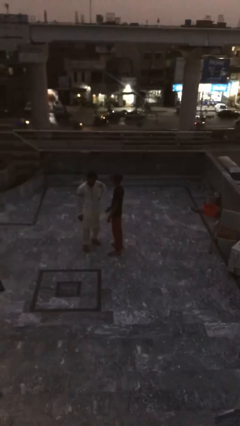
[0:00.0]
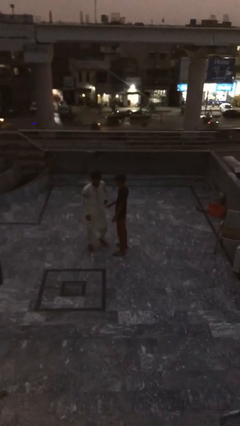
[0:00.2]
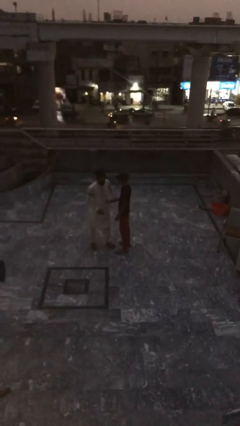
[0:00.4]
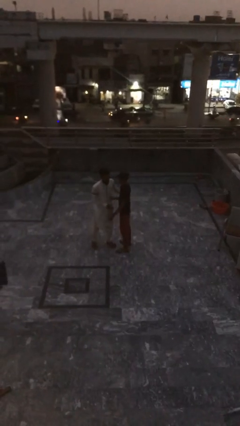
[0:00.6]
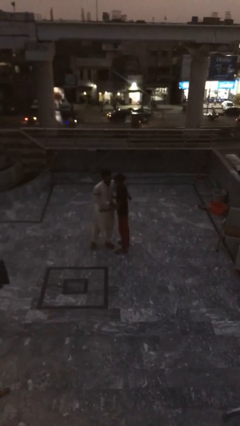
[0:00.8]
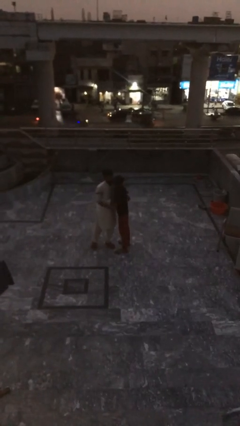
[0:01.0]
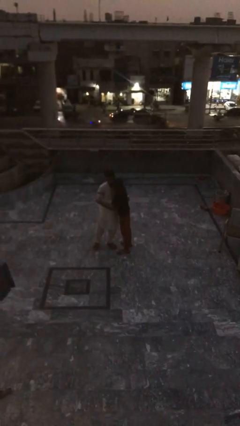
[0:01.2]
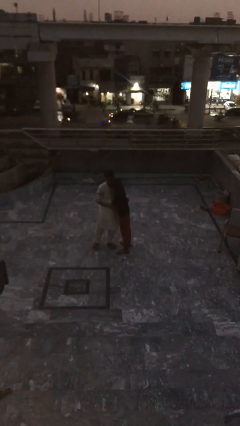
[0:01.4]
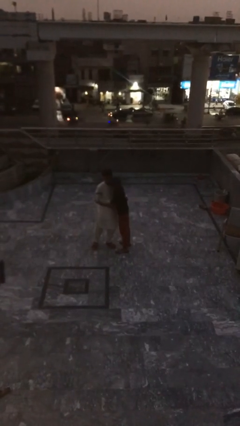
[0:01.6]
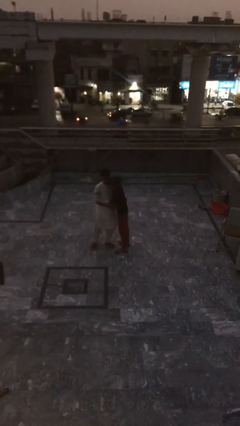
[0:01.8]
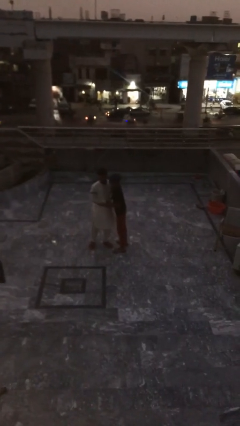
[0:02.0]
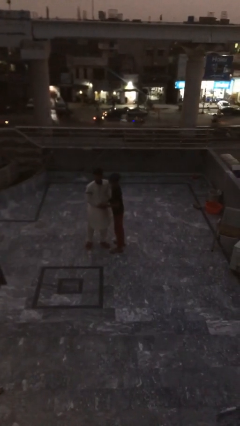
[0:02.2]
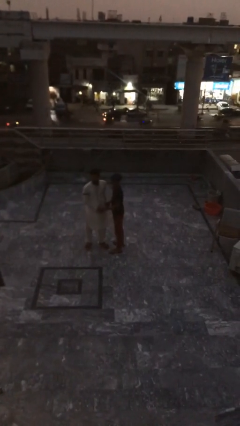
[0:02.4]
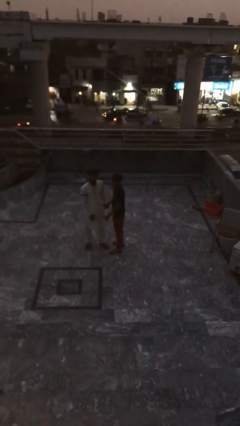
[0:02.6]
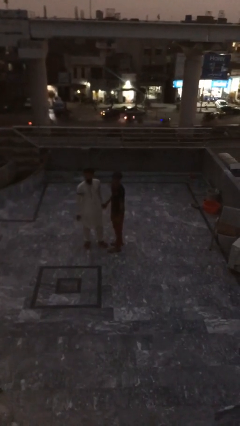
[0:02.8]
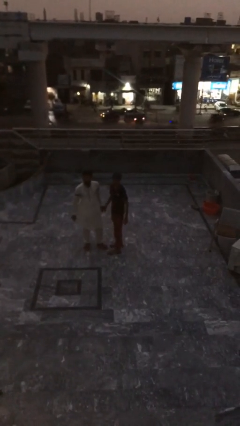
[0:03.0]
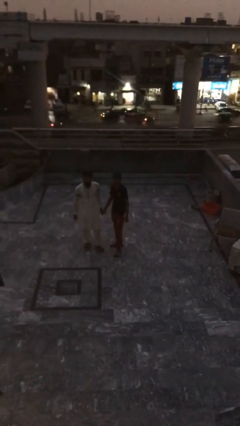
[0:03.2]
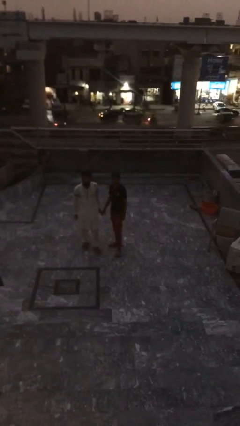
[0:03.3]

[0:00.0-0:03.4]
person embraces person

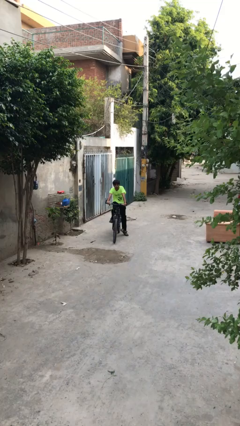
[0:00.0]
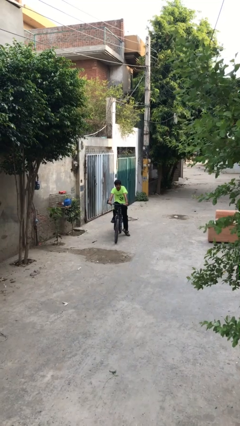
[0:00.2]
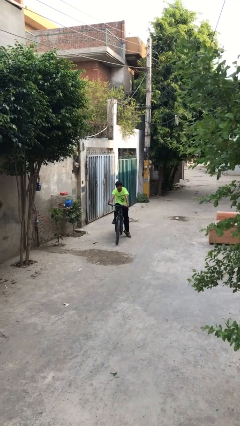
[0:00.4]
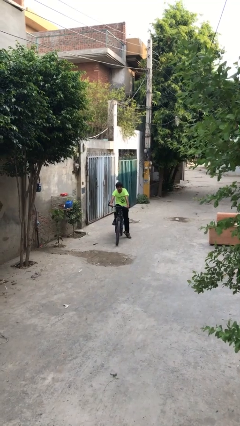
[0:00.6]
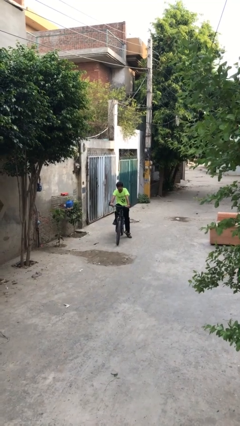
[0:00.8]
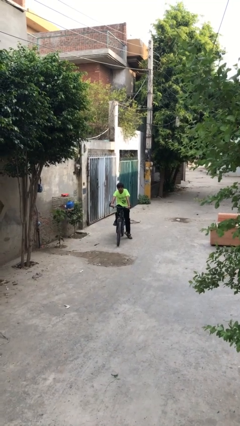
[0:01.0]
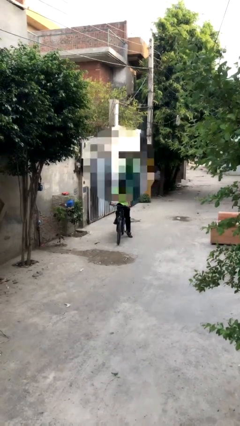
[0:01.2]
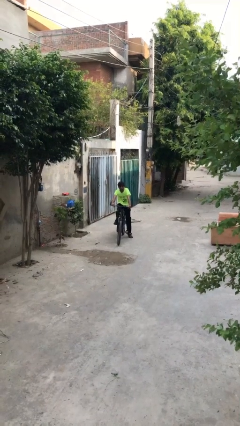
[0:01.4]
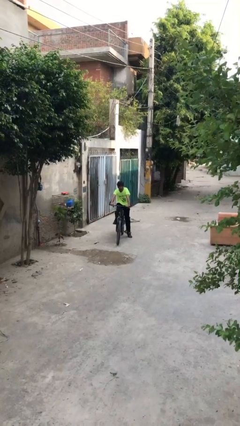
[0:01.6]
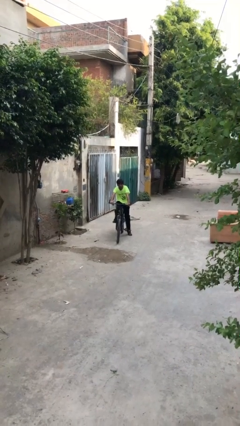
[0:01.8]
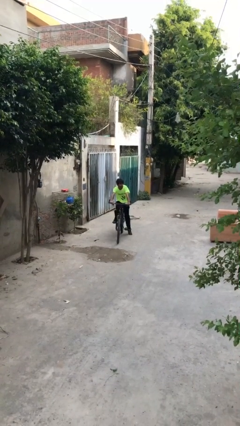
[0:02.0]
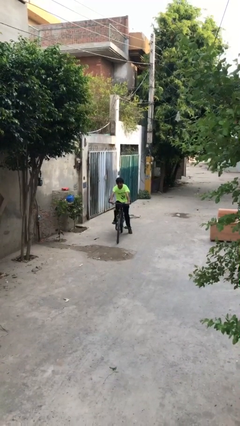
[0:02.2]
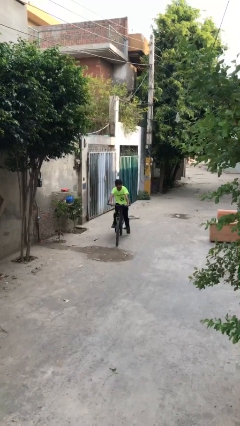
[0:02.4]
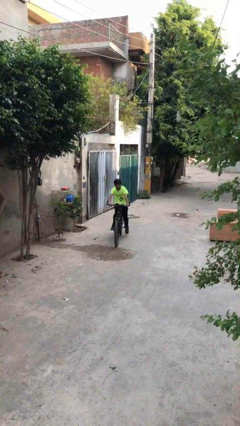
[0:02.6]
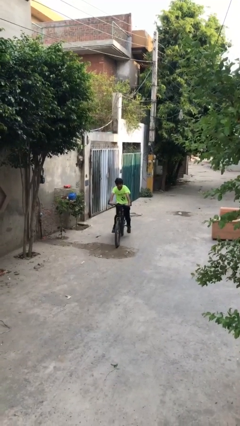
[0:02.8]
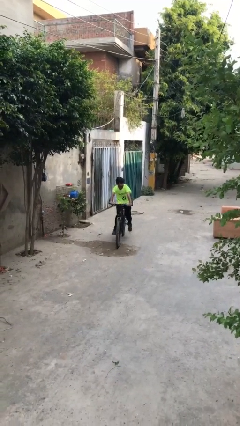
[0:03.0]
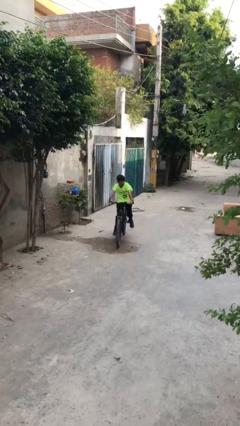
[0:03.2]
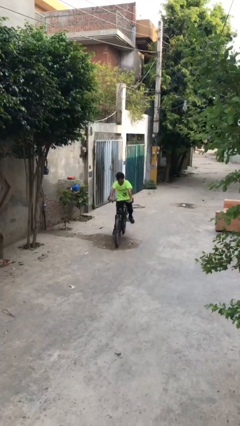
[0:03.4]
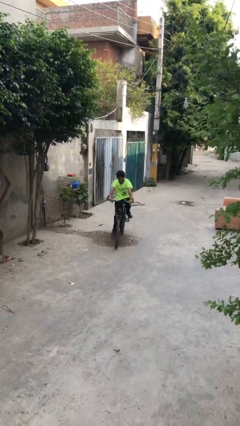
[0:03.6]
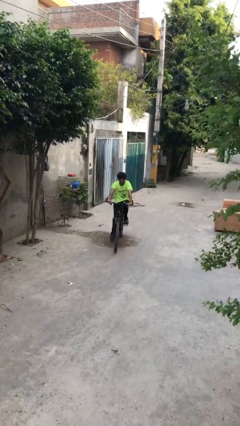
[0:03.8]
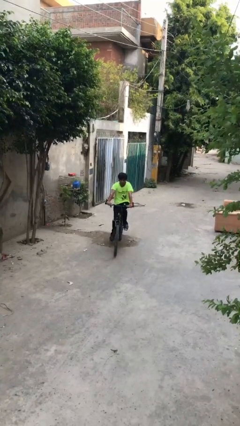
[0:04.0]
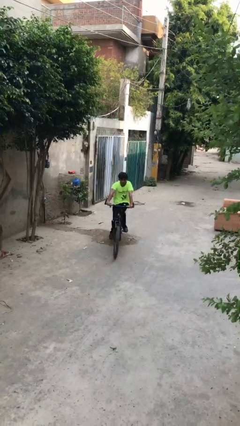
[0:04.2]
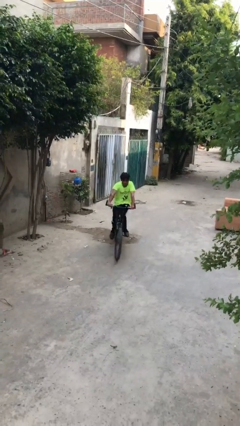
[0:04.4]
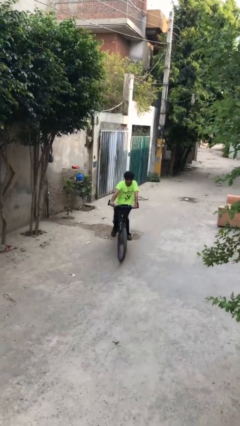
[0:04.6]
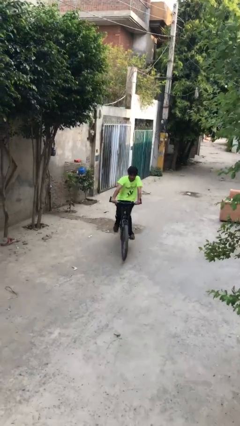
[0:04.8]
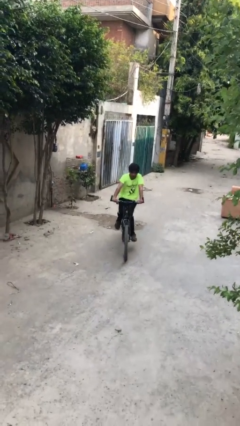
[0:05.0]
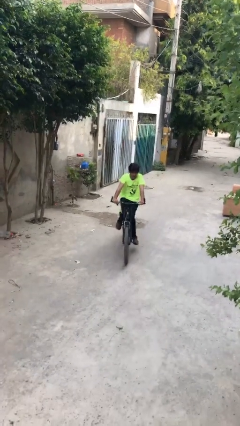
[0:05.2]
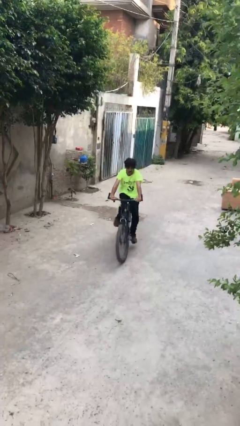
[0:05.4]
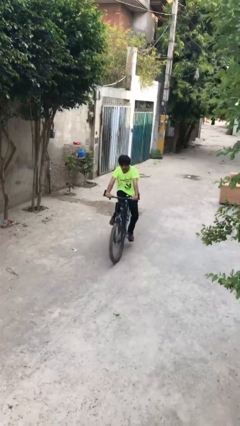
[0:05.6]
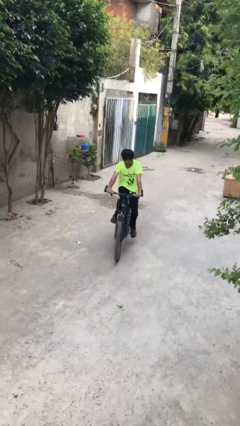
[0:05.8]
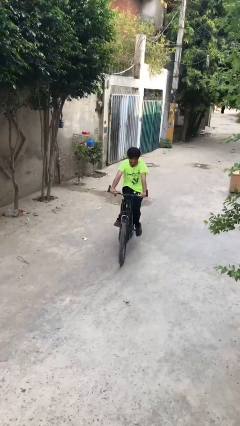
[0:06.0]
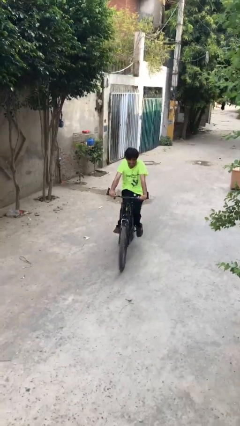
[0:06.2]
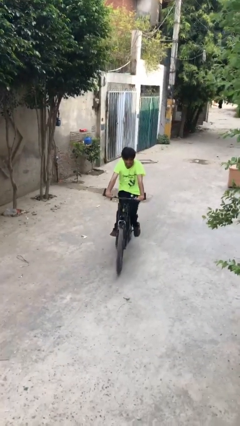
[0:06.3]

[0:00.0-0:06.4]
person rides bicycle

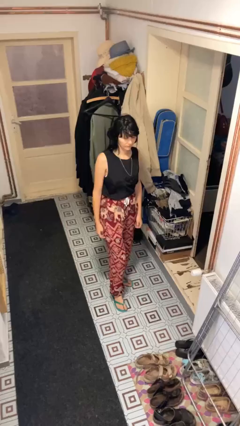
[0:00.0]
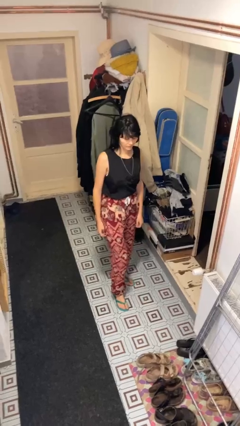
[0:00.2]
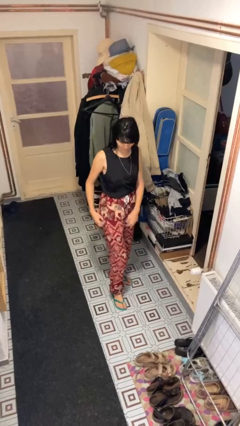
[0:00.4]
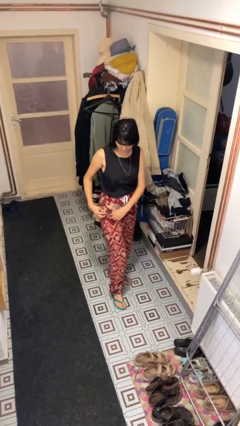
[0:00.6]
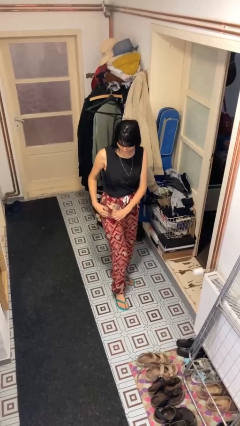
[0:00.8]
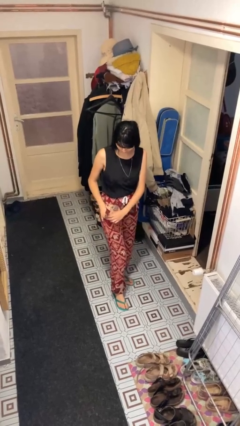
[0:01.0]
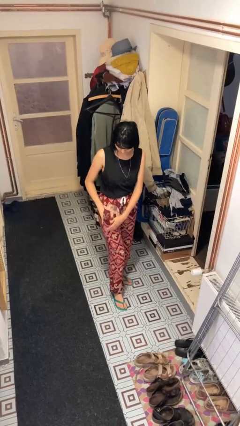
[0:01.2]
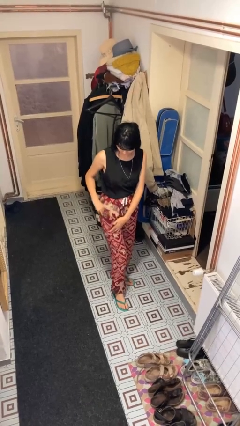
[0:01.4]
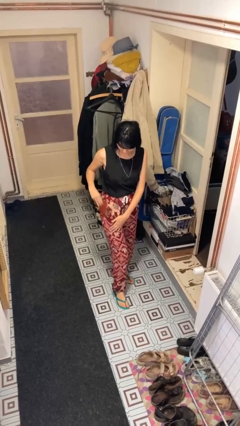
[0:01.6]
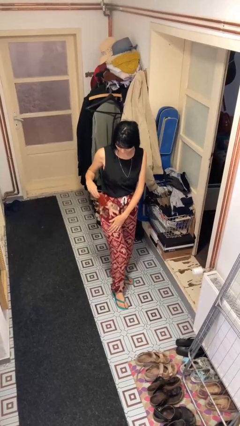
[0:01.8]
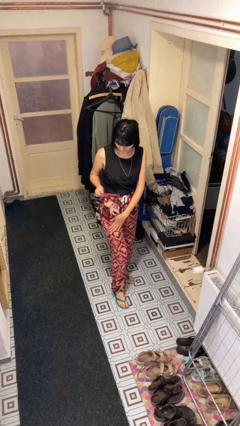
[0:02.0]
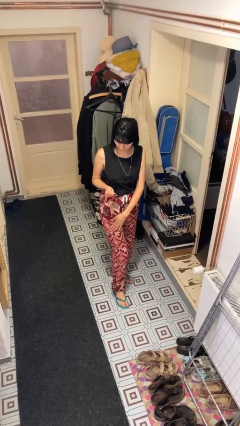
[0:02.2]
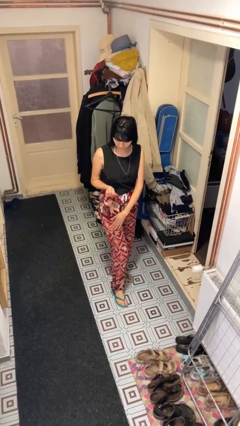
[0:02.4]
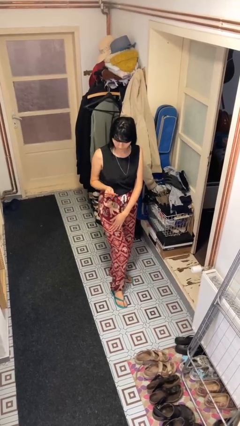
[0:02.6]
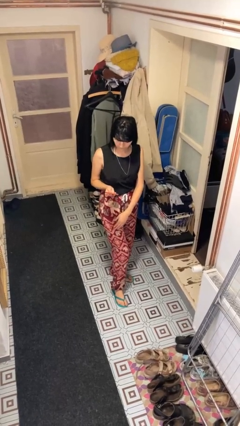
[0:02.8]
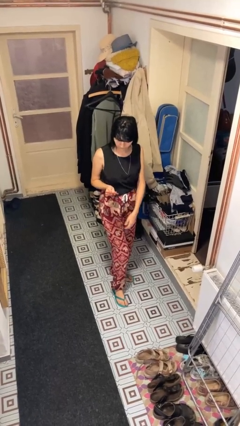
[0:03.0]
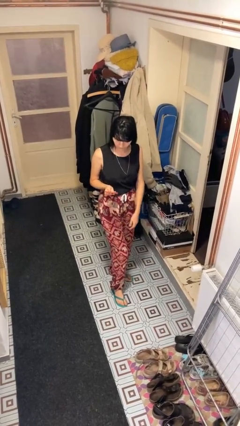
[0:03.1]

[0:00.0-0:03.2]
person takes phone from pocket

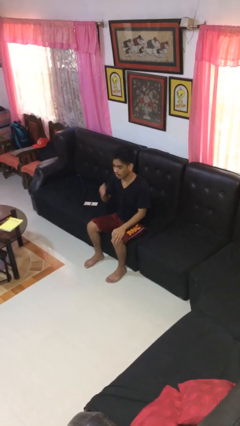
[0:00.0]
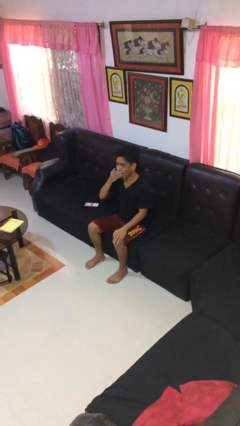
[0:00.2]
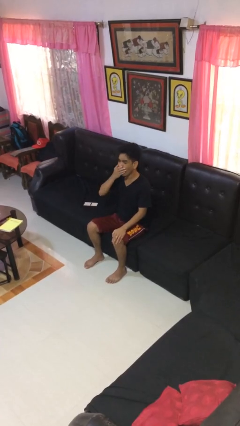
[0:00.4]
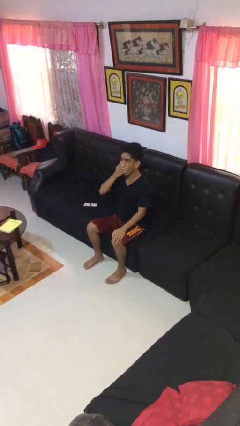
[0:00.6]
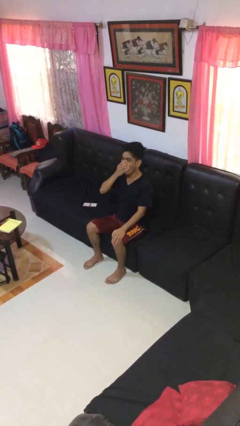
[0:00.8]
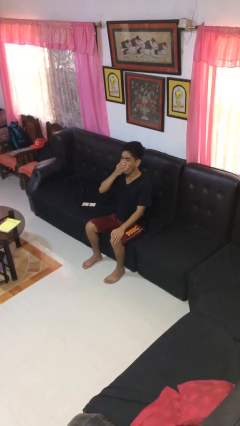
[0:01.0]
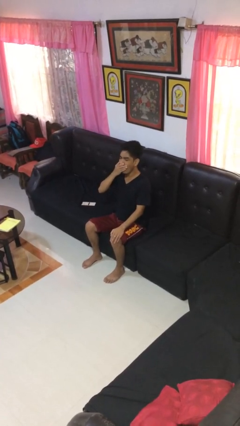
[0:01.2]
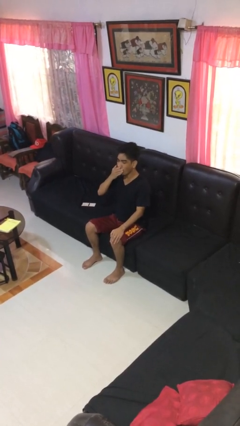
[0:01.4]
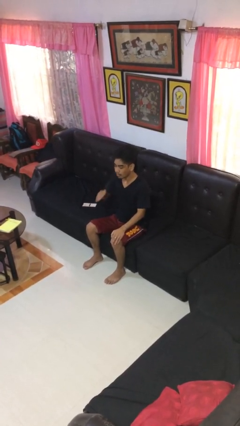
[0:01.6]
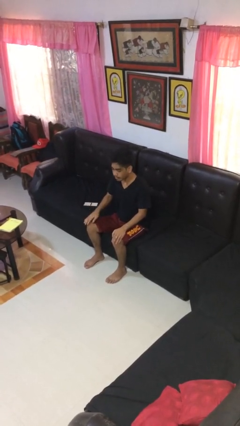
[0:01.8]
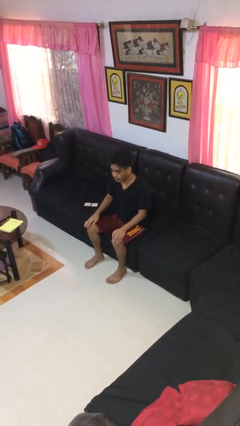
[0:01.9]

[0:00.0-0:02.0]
person yawns

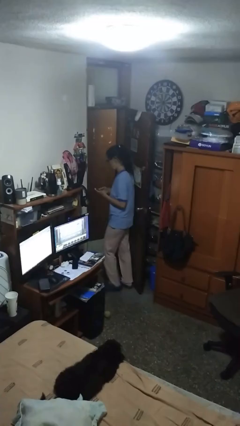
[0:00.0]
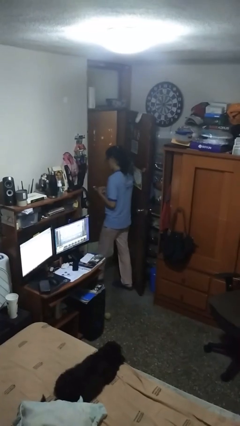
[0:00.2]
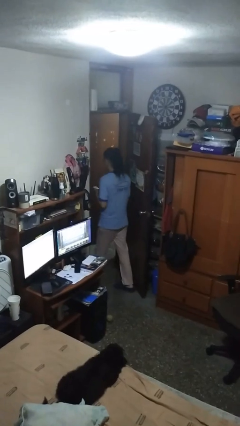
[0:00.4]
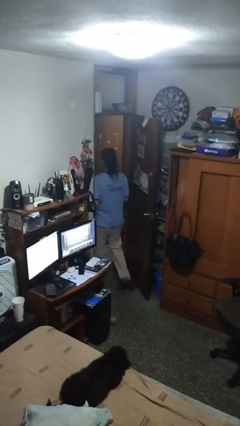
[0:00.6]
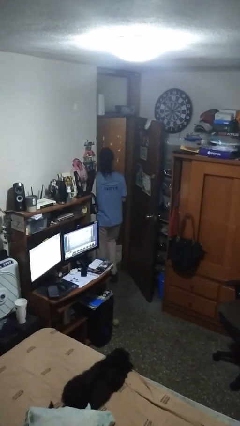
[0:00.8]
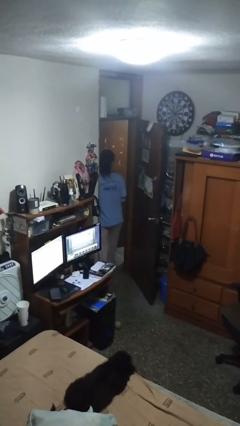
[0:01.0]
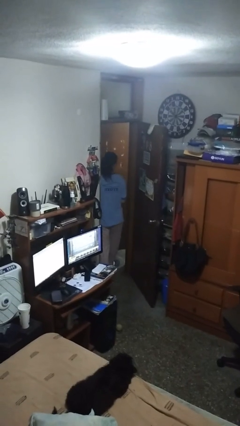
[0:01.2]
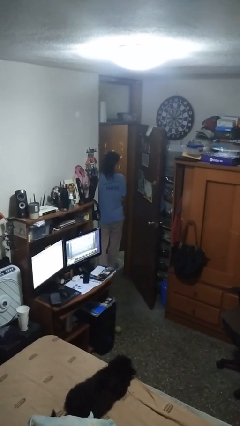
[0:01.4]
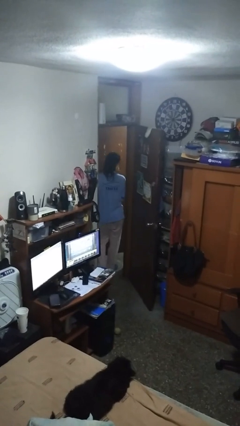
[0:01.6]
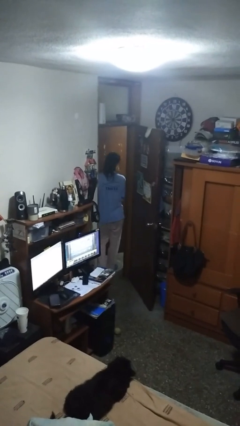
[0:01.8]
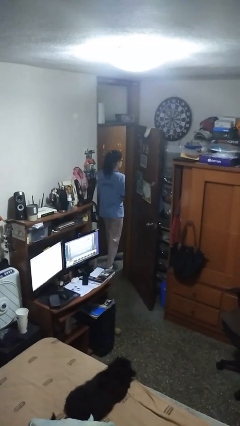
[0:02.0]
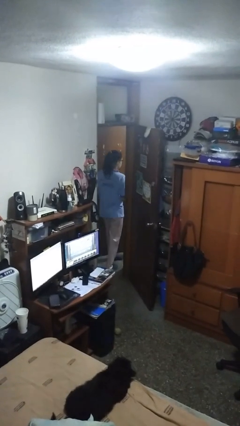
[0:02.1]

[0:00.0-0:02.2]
person exits scene through structure

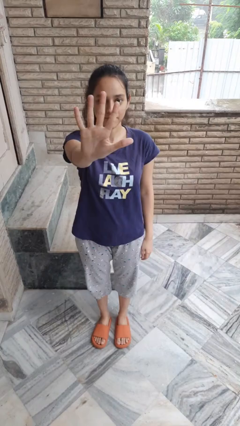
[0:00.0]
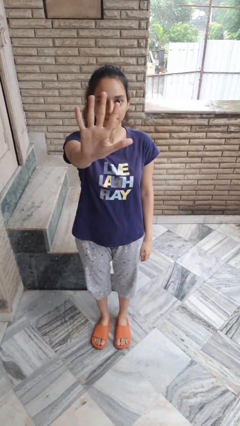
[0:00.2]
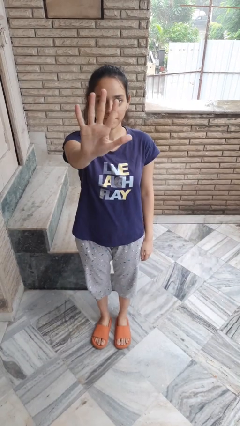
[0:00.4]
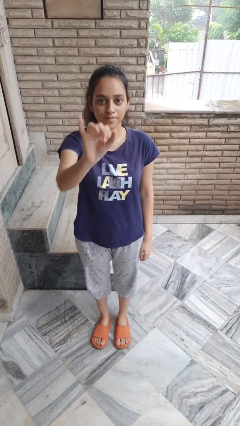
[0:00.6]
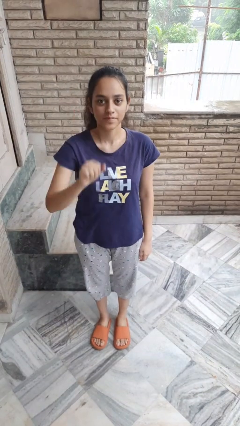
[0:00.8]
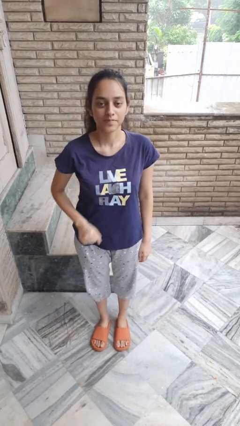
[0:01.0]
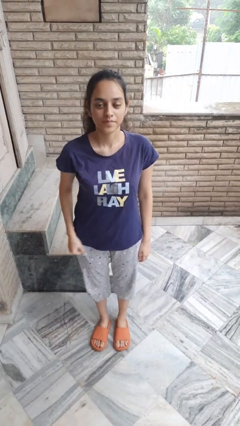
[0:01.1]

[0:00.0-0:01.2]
person gestures number five
